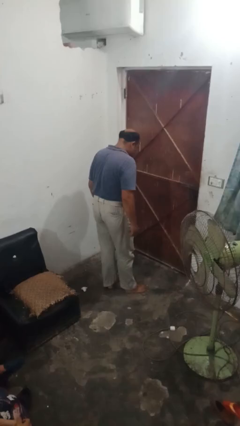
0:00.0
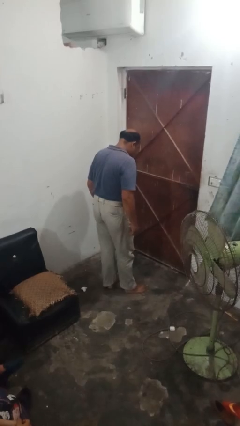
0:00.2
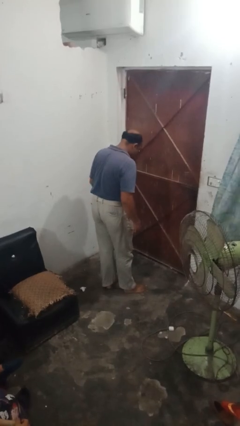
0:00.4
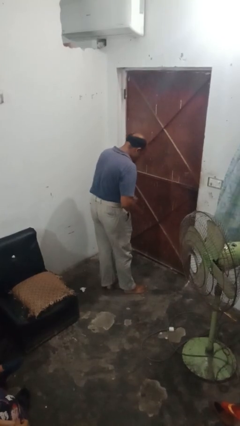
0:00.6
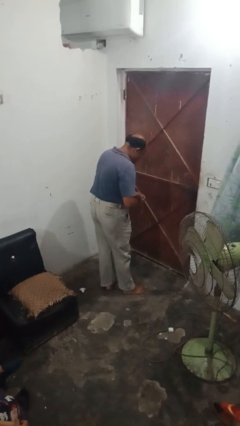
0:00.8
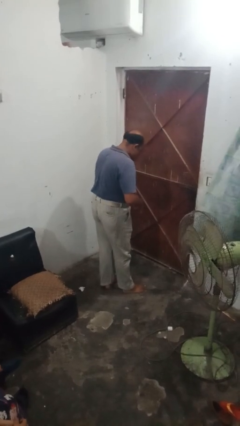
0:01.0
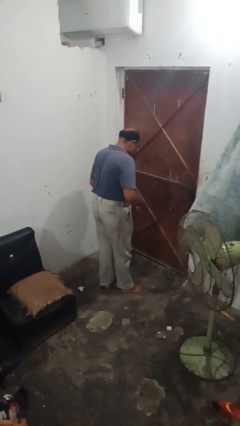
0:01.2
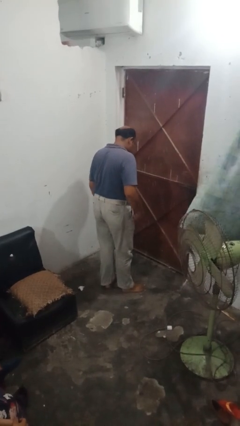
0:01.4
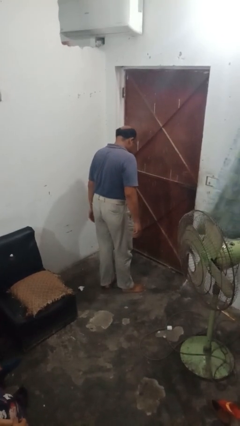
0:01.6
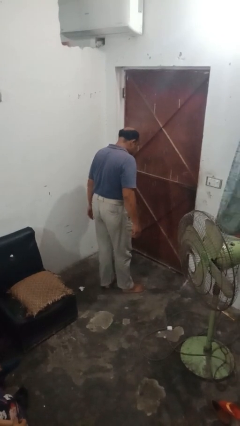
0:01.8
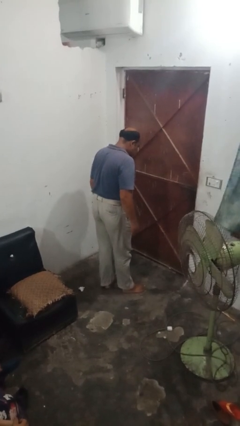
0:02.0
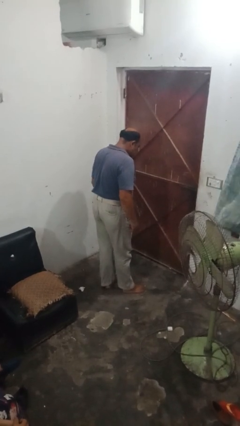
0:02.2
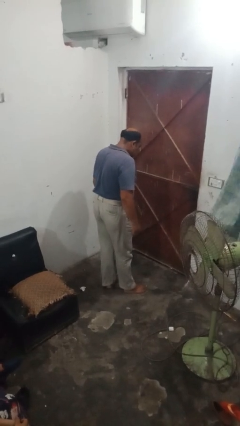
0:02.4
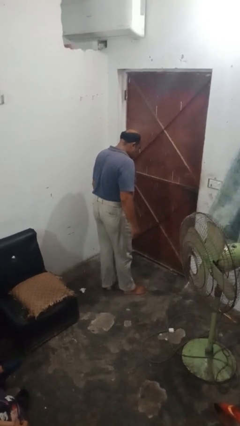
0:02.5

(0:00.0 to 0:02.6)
person takes off belt

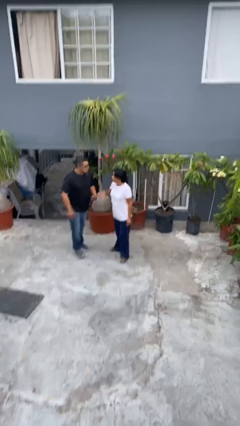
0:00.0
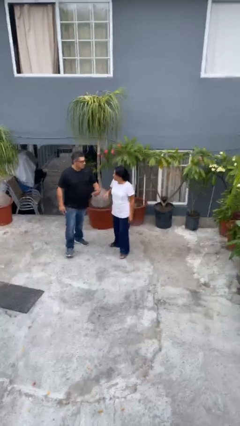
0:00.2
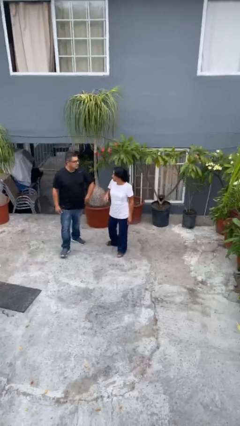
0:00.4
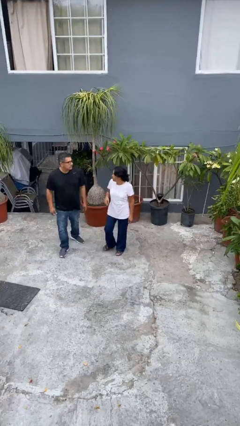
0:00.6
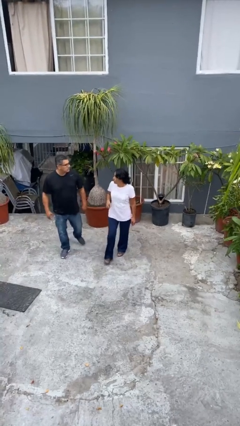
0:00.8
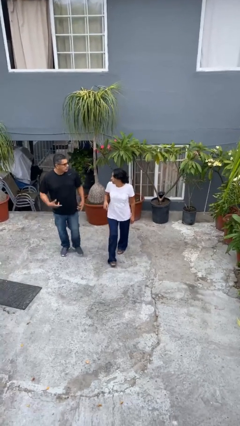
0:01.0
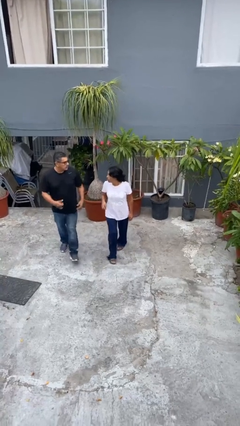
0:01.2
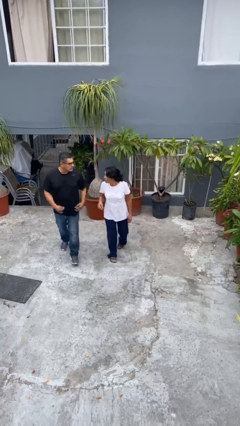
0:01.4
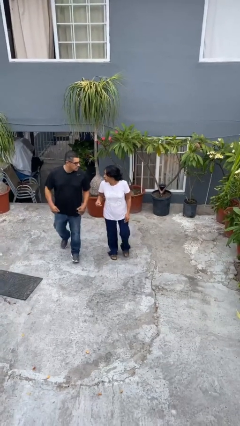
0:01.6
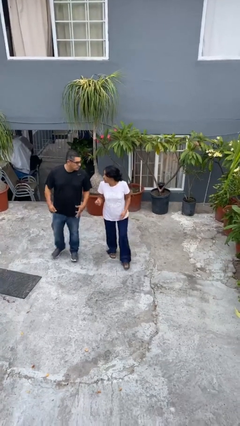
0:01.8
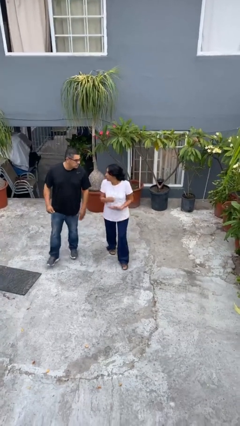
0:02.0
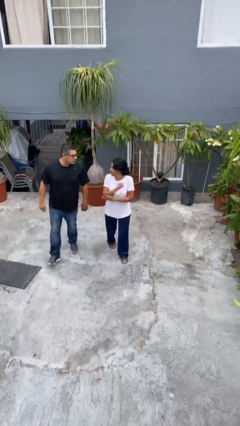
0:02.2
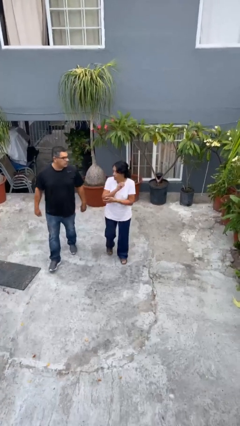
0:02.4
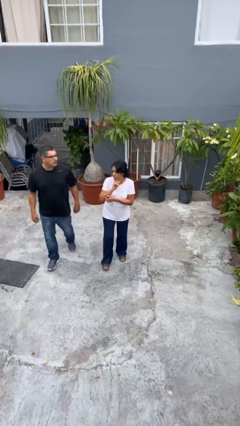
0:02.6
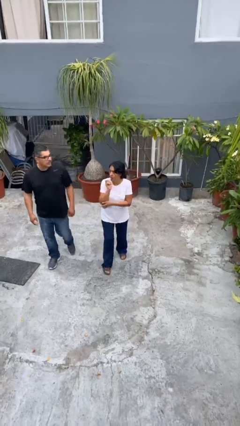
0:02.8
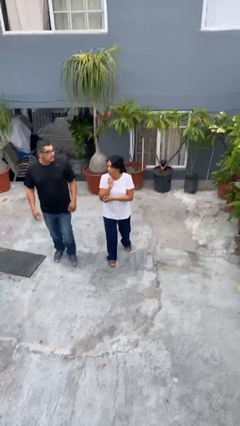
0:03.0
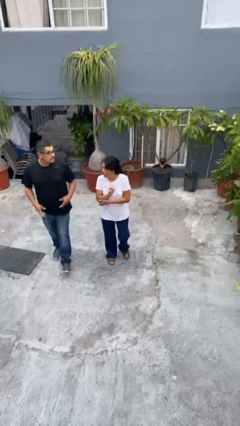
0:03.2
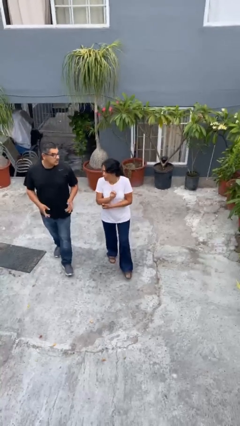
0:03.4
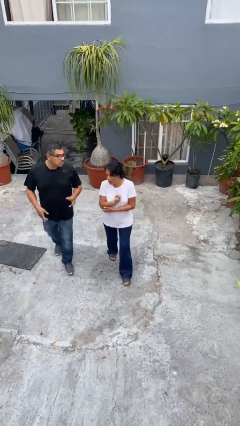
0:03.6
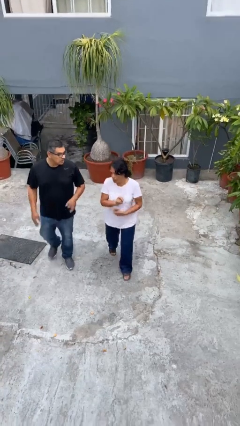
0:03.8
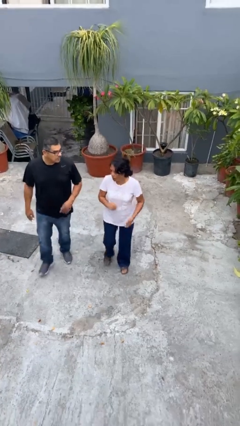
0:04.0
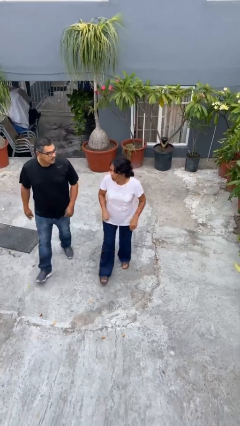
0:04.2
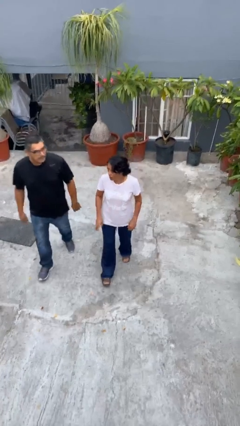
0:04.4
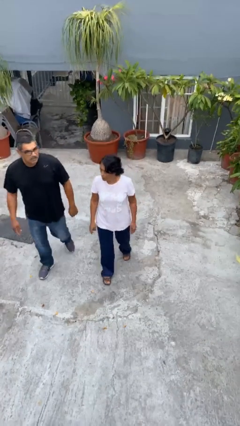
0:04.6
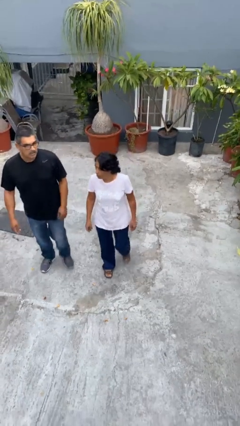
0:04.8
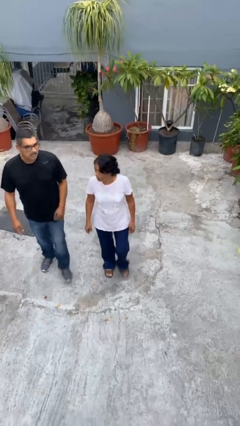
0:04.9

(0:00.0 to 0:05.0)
person talks to person

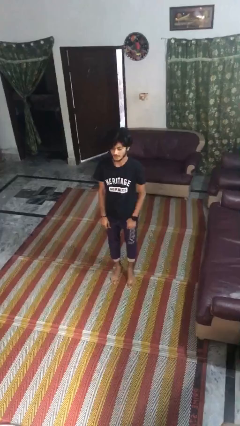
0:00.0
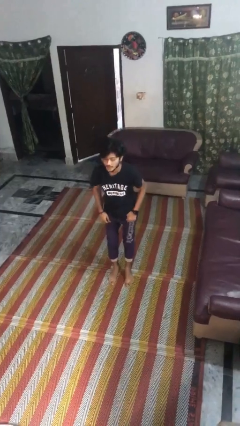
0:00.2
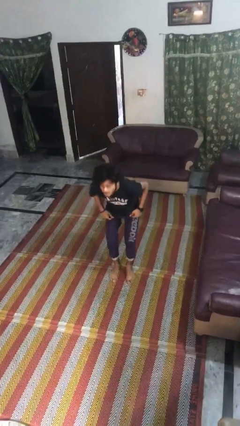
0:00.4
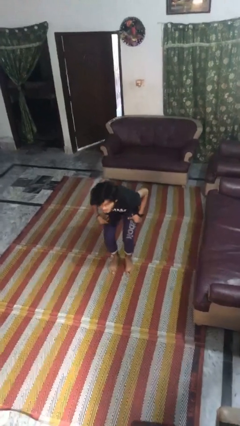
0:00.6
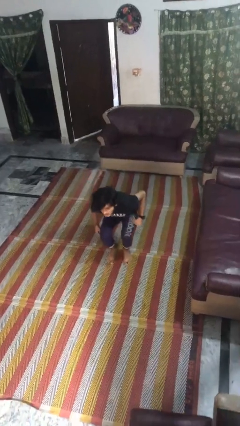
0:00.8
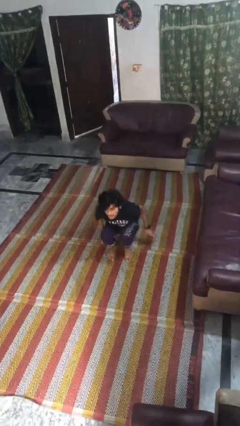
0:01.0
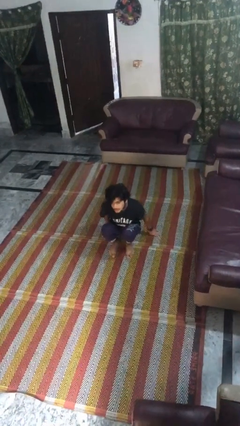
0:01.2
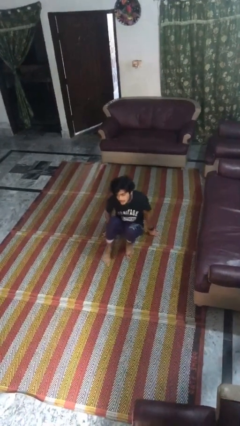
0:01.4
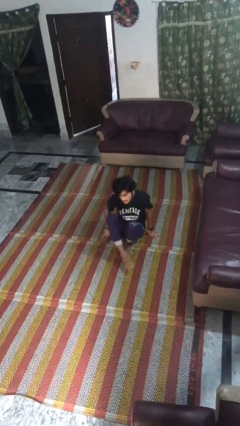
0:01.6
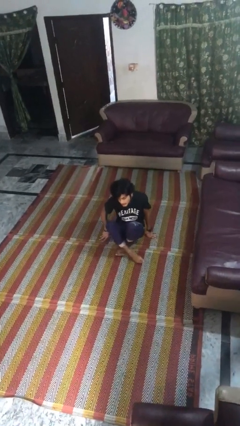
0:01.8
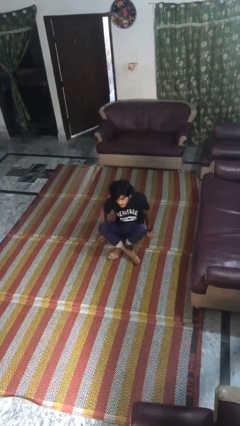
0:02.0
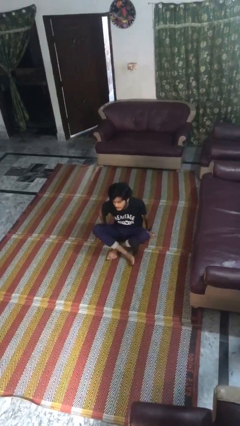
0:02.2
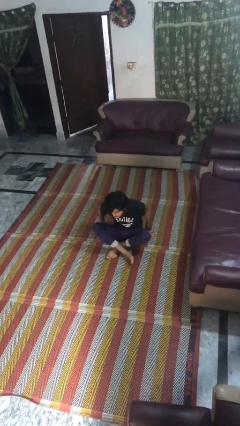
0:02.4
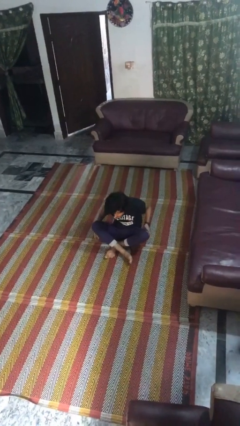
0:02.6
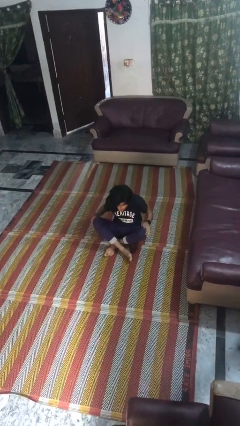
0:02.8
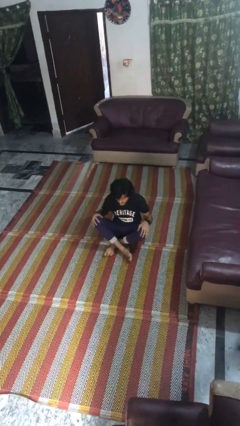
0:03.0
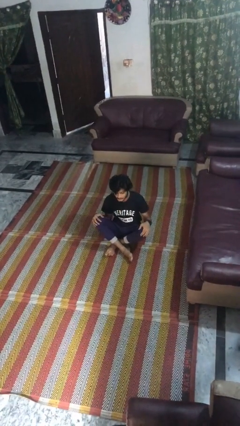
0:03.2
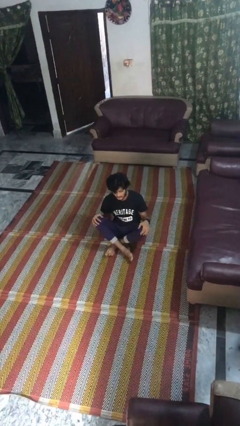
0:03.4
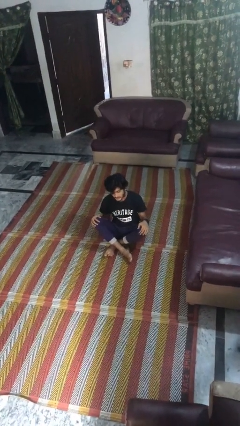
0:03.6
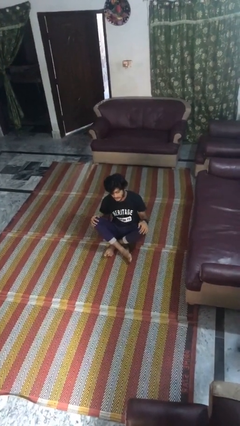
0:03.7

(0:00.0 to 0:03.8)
person sits crisscross

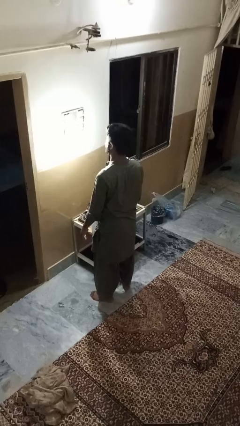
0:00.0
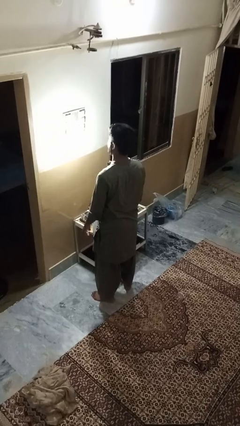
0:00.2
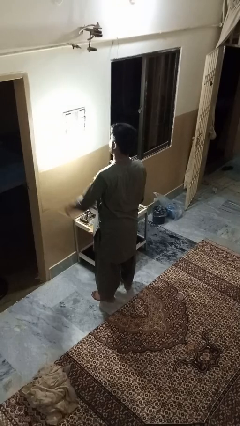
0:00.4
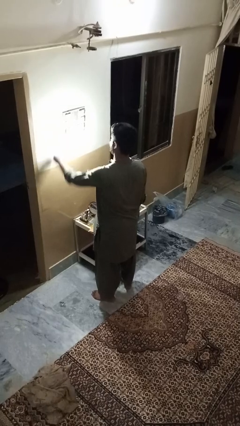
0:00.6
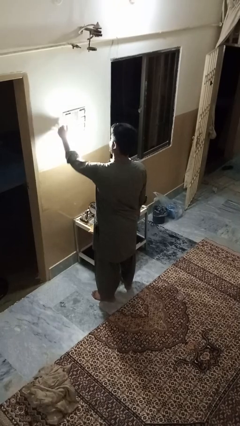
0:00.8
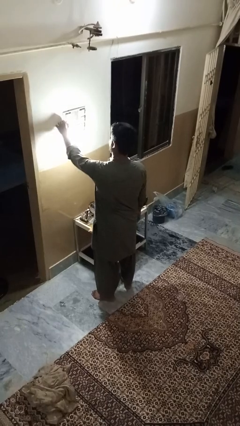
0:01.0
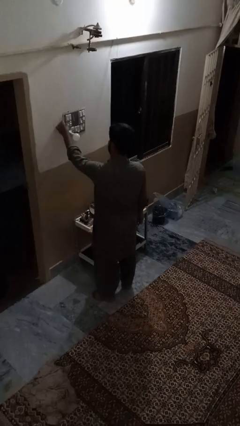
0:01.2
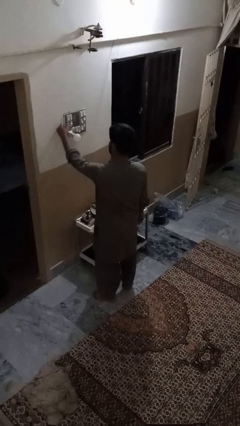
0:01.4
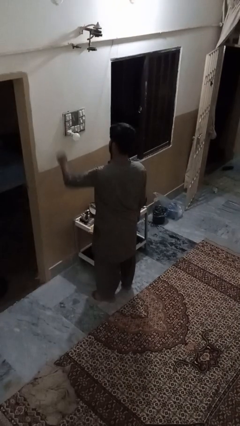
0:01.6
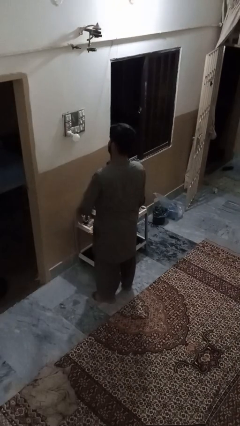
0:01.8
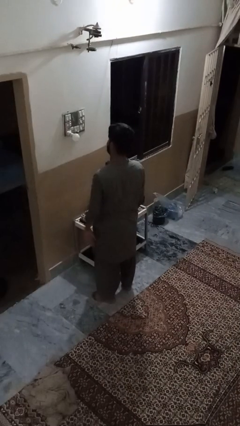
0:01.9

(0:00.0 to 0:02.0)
person turns off lamp

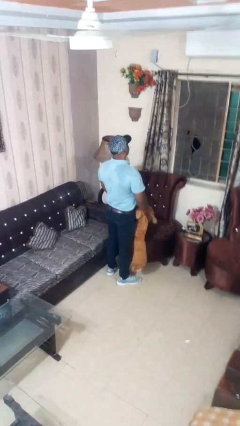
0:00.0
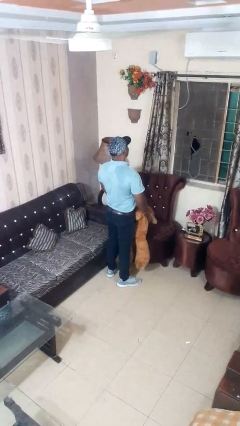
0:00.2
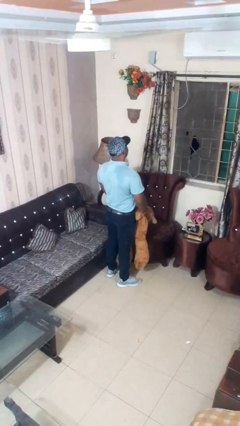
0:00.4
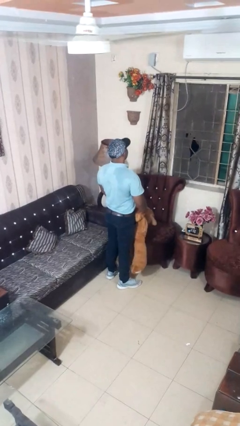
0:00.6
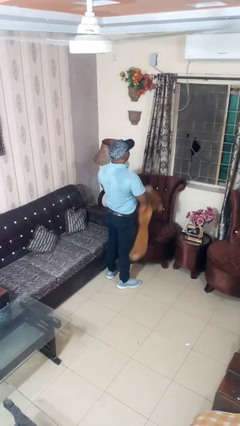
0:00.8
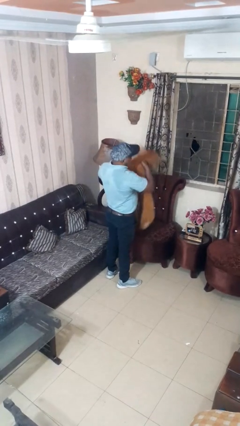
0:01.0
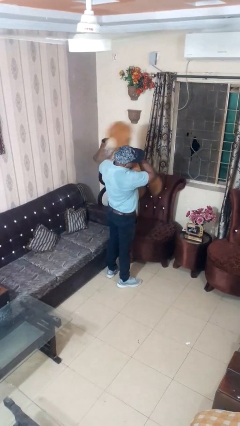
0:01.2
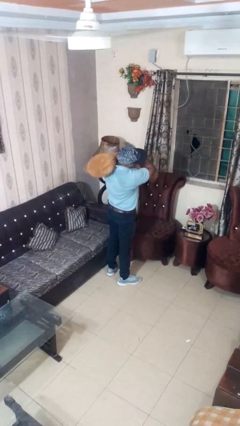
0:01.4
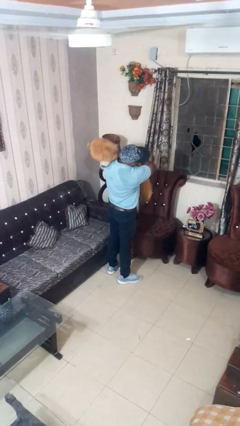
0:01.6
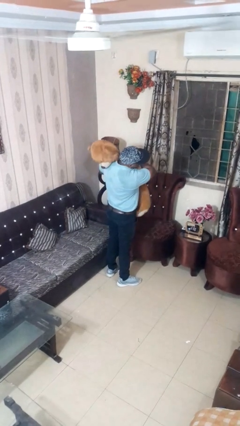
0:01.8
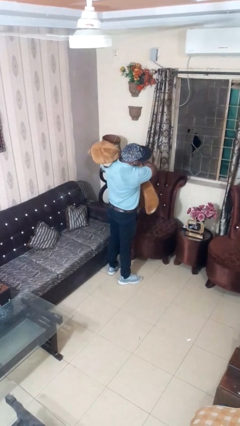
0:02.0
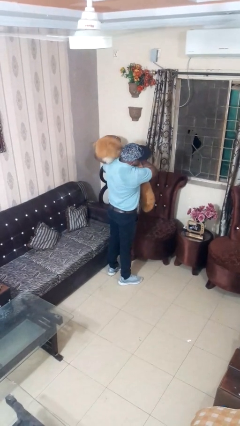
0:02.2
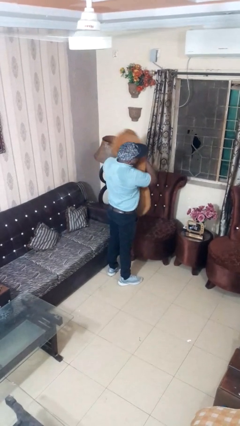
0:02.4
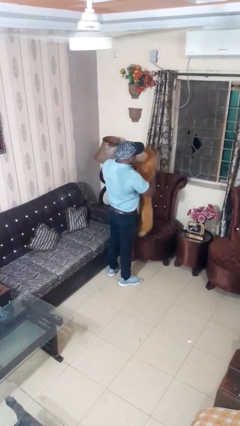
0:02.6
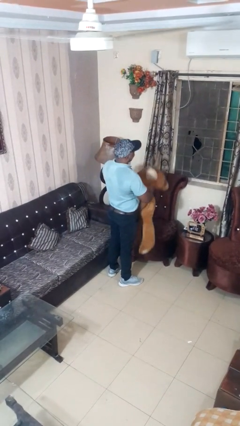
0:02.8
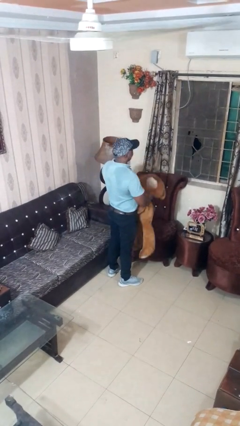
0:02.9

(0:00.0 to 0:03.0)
person hugs stuffed animal

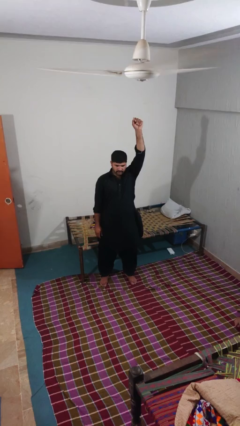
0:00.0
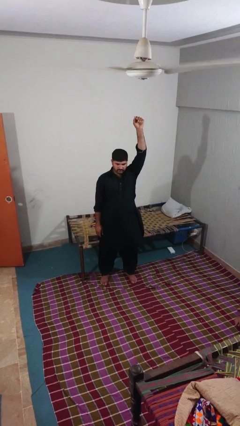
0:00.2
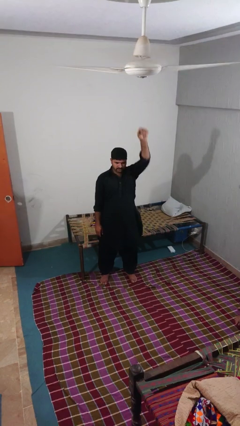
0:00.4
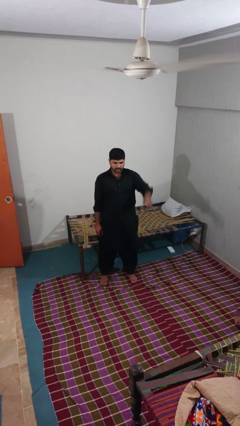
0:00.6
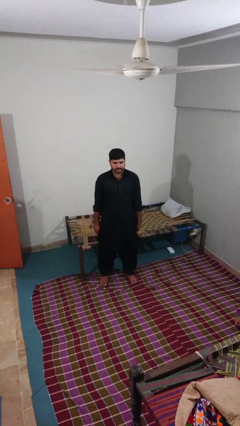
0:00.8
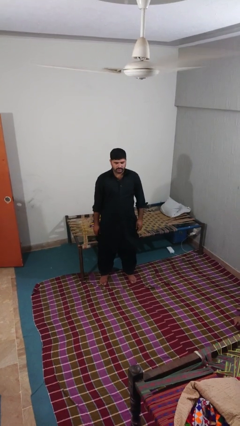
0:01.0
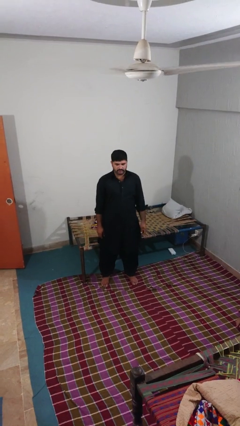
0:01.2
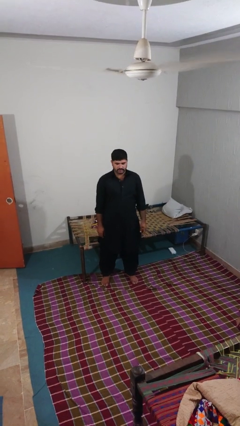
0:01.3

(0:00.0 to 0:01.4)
person gestures lower hand
